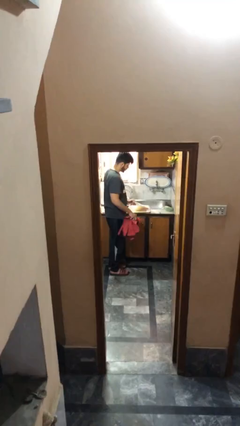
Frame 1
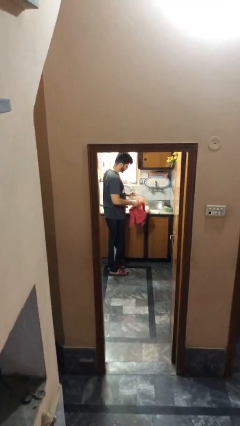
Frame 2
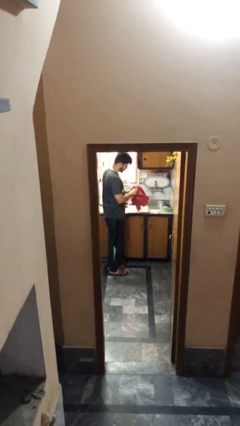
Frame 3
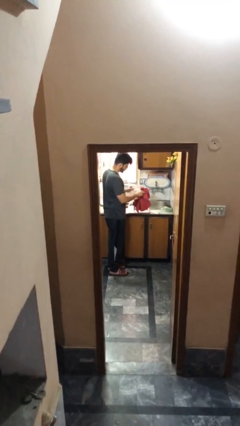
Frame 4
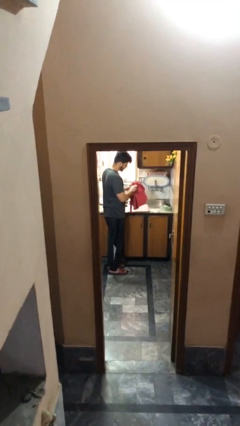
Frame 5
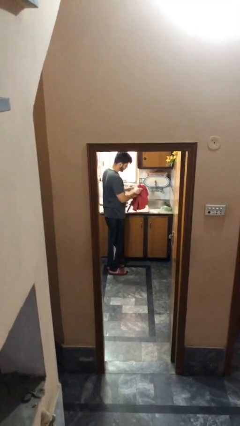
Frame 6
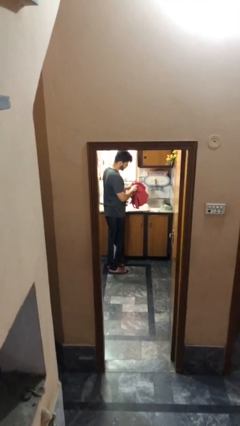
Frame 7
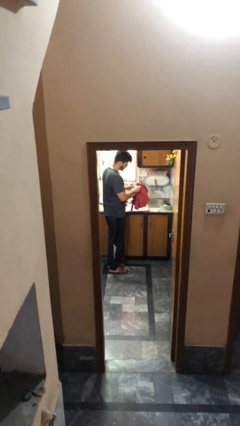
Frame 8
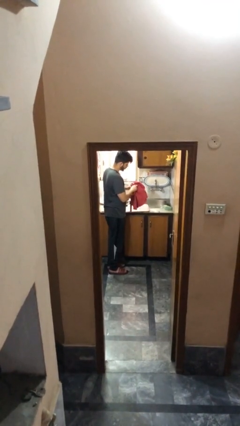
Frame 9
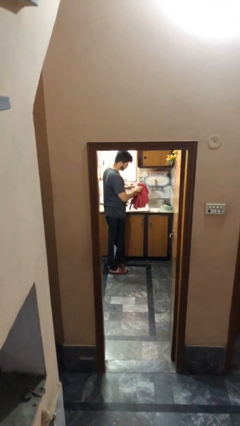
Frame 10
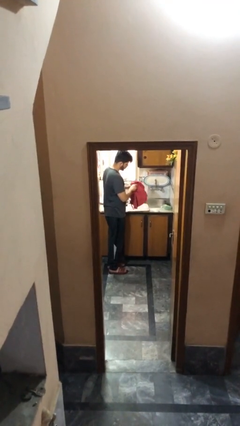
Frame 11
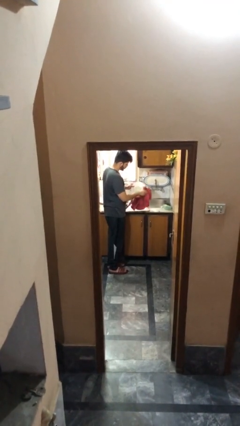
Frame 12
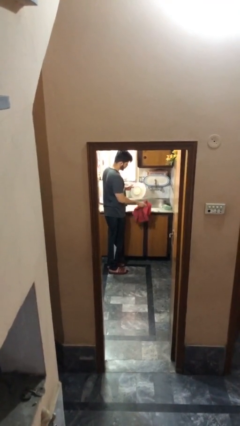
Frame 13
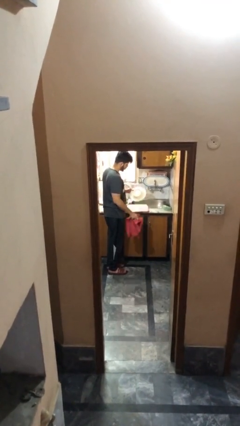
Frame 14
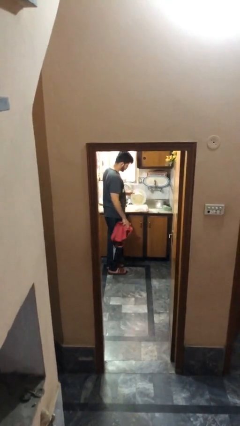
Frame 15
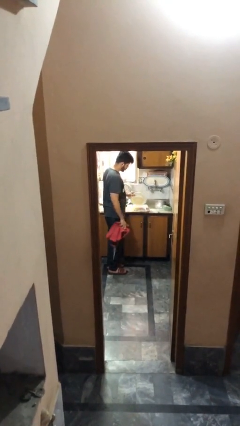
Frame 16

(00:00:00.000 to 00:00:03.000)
person dries dish

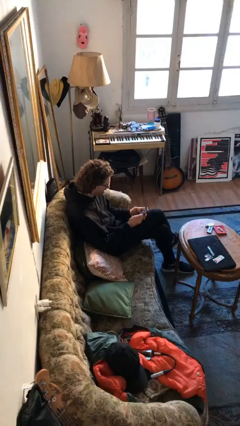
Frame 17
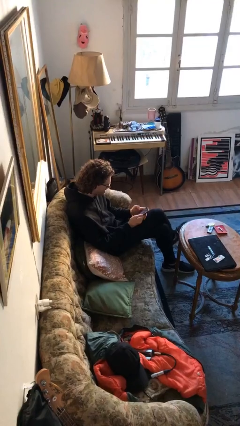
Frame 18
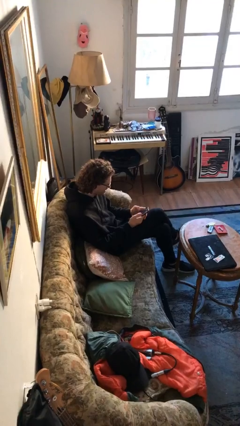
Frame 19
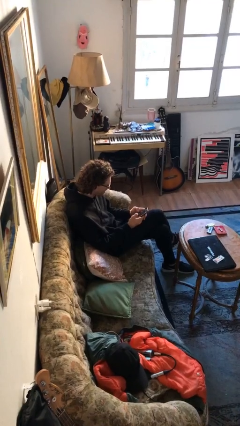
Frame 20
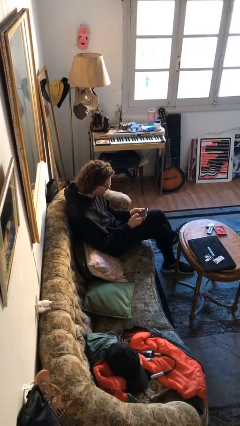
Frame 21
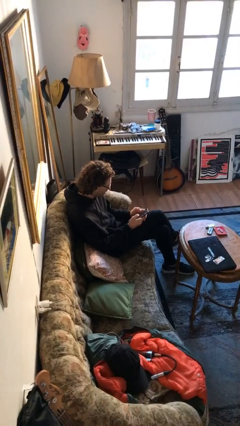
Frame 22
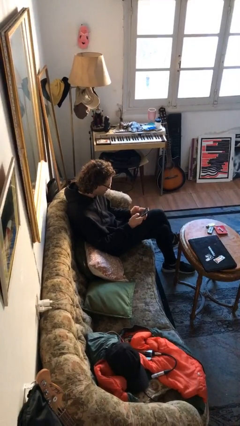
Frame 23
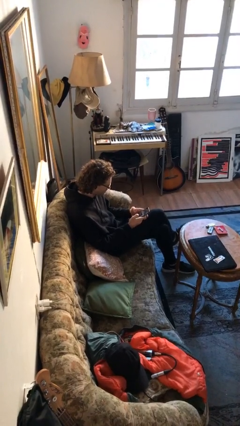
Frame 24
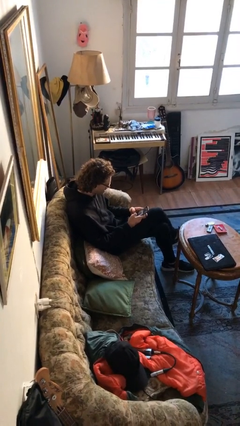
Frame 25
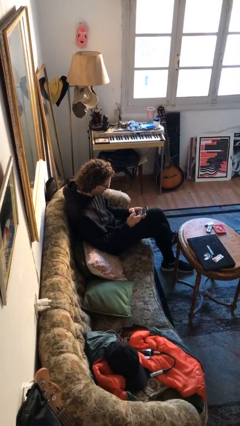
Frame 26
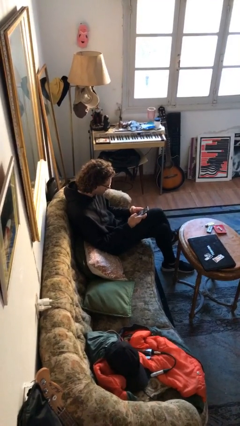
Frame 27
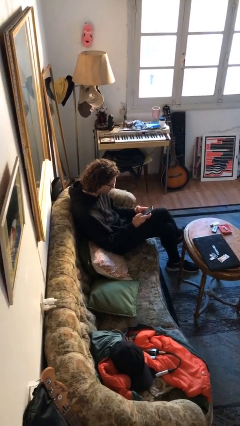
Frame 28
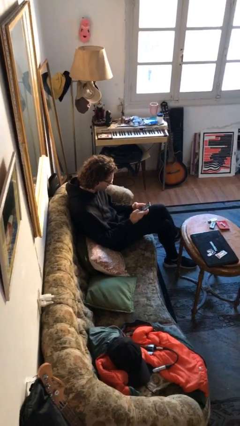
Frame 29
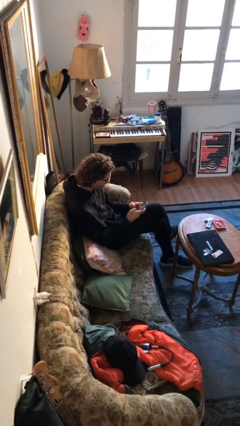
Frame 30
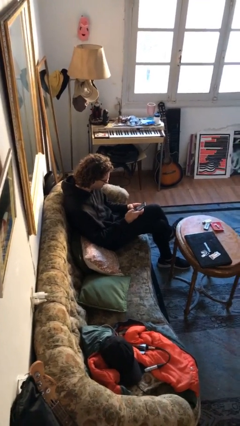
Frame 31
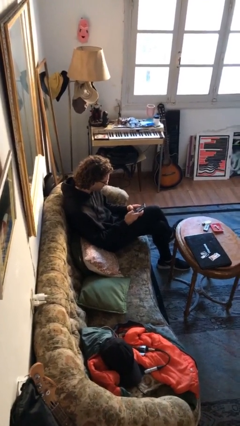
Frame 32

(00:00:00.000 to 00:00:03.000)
person texts on phone

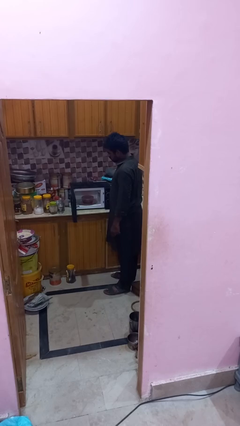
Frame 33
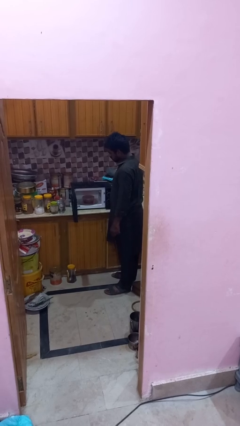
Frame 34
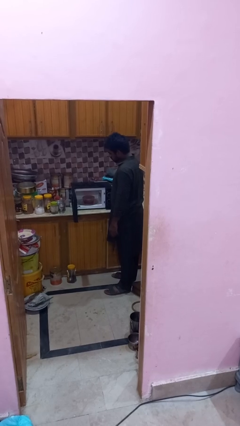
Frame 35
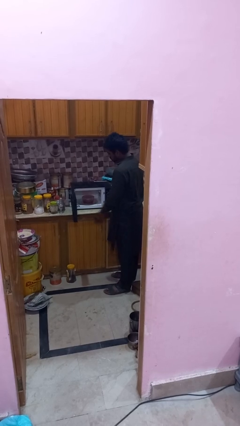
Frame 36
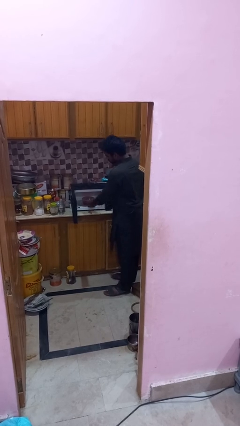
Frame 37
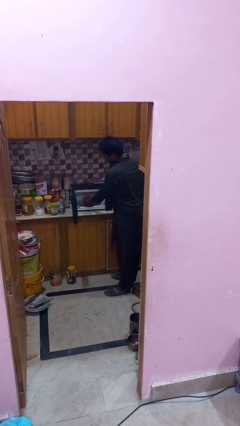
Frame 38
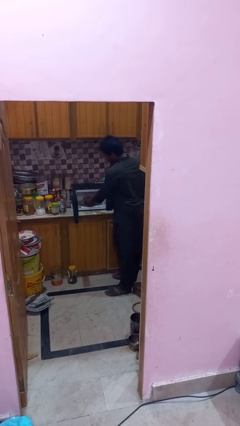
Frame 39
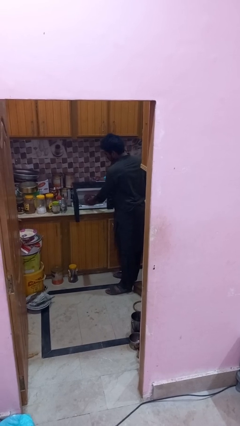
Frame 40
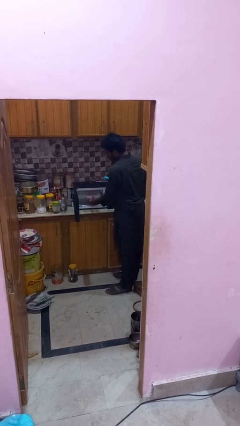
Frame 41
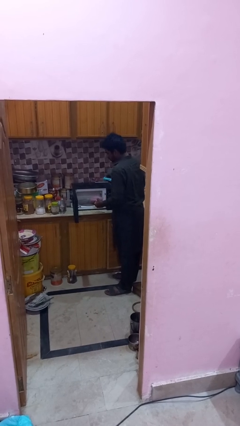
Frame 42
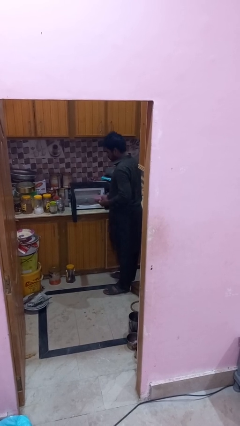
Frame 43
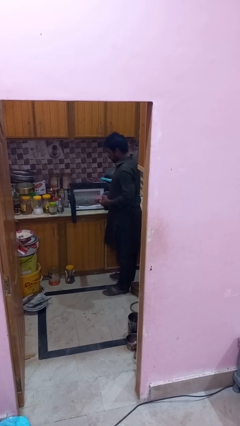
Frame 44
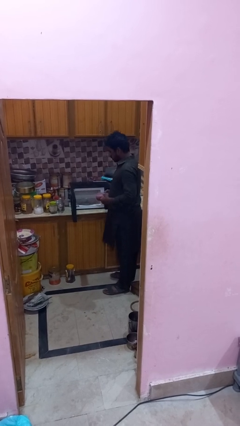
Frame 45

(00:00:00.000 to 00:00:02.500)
person takes object from microwave

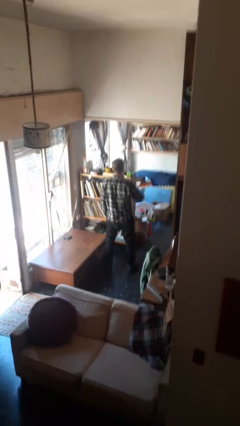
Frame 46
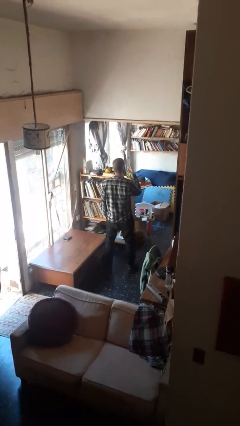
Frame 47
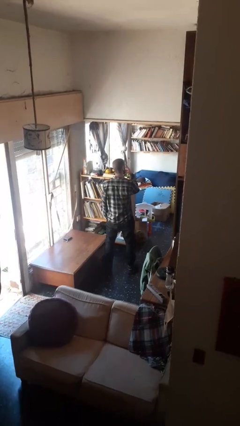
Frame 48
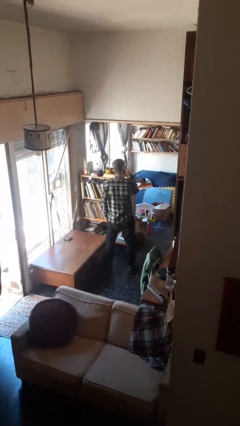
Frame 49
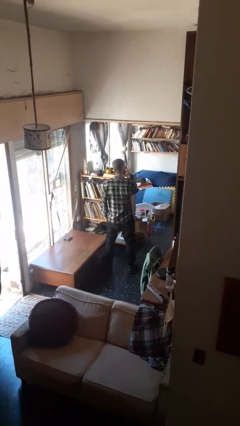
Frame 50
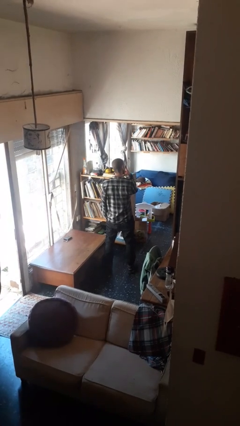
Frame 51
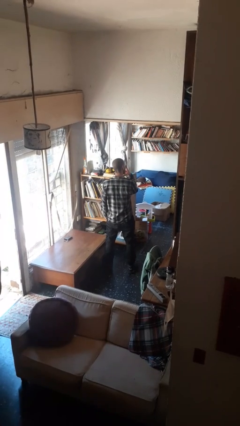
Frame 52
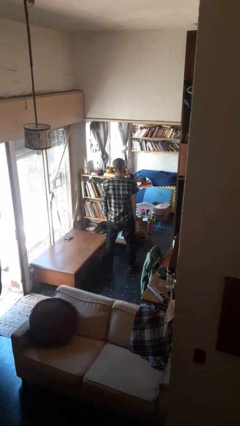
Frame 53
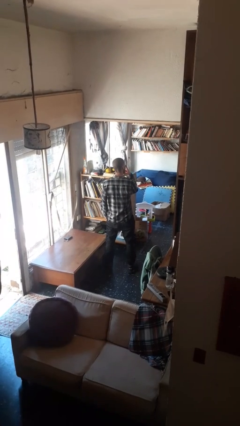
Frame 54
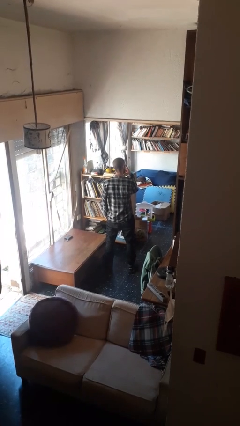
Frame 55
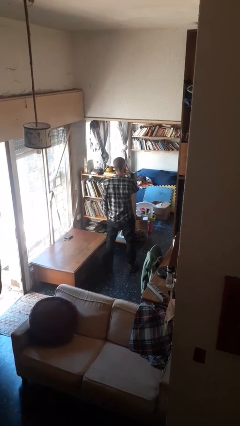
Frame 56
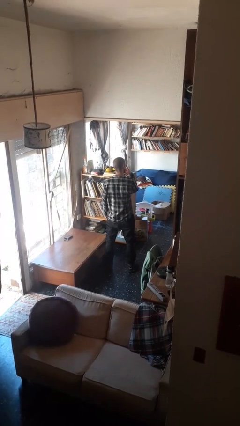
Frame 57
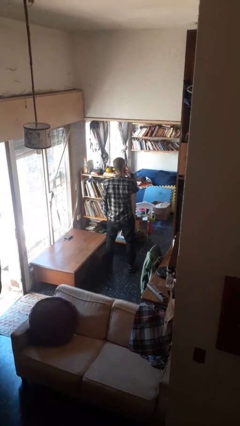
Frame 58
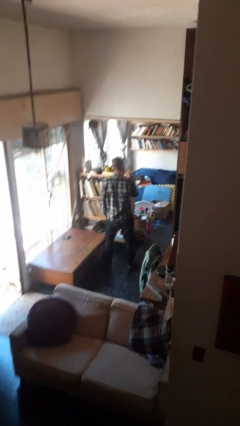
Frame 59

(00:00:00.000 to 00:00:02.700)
person gestures watch closely

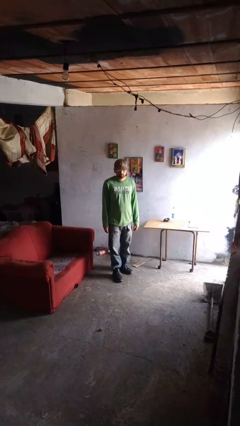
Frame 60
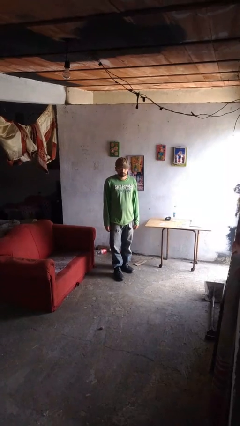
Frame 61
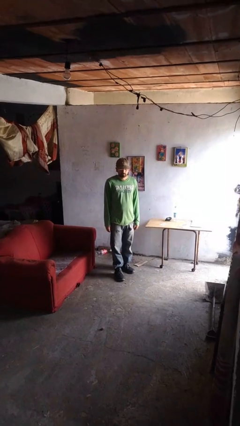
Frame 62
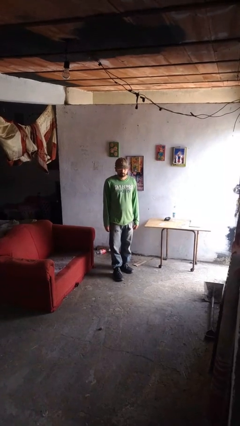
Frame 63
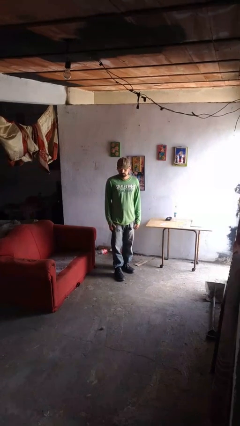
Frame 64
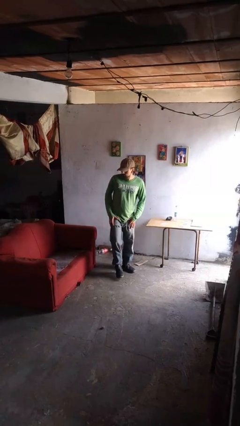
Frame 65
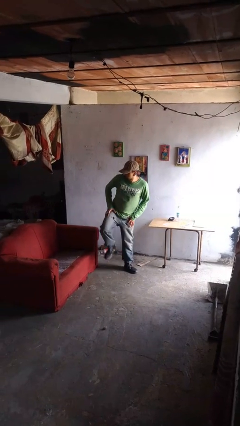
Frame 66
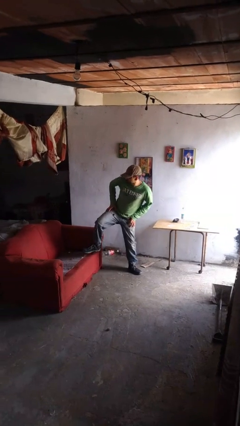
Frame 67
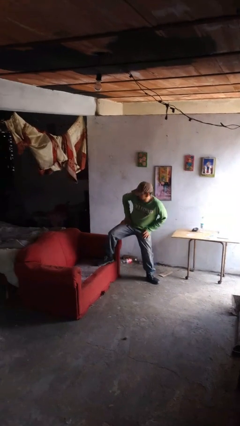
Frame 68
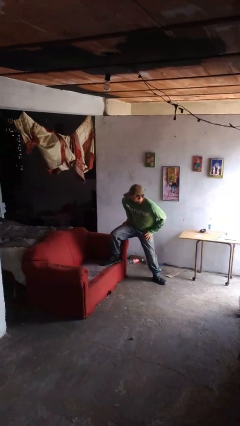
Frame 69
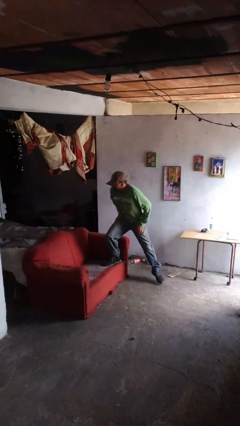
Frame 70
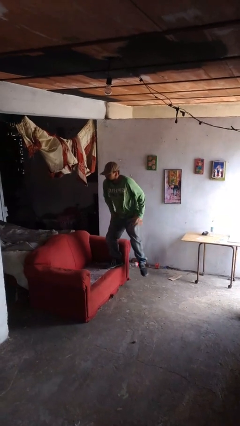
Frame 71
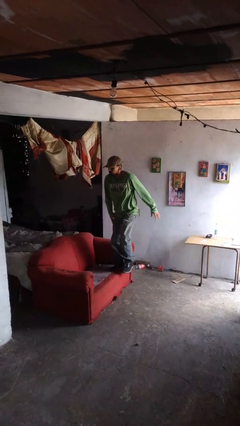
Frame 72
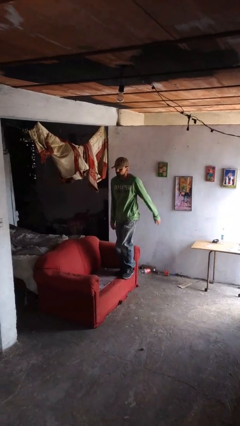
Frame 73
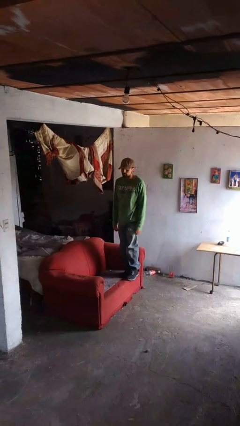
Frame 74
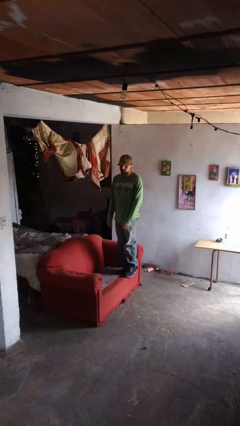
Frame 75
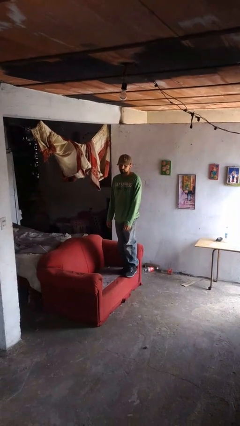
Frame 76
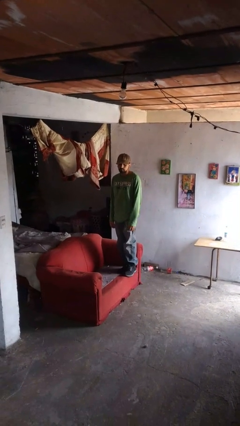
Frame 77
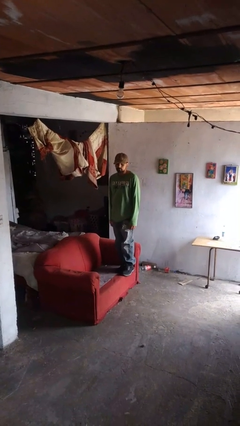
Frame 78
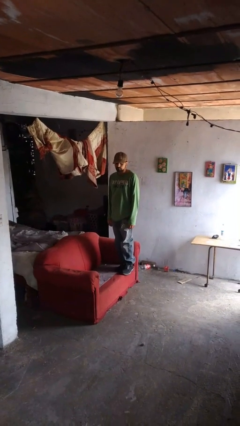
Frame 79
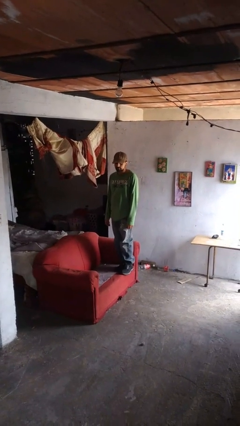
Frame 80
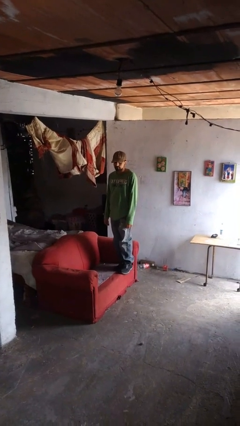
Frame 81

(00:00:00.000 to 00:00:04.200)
person climbs on couch

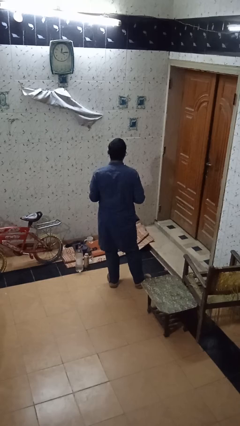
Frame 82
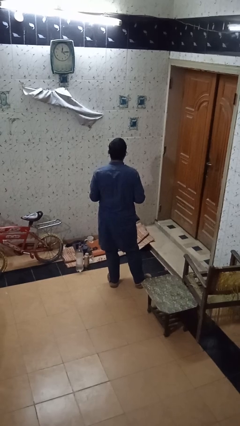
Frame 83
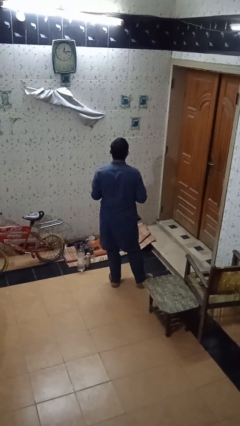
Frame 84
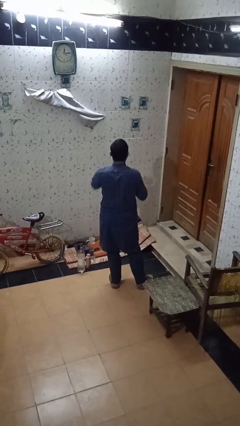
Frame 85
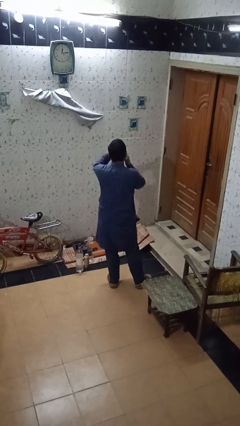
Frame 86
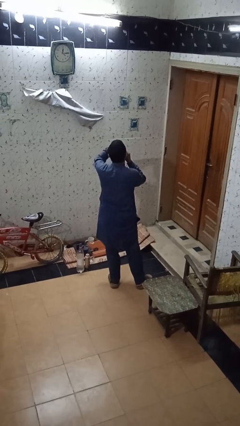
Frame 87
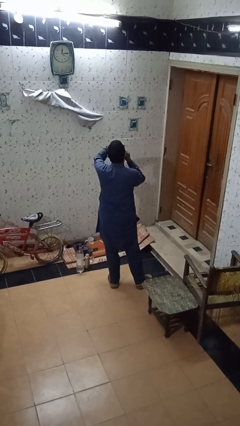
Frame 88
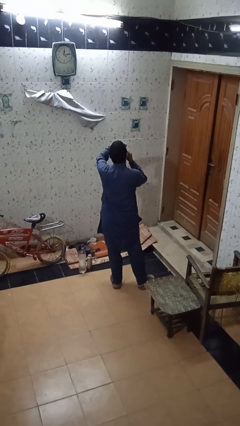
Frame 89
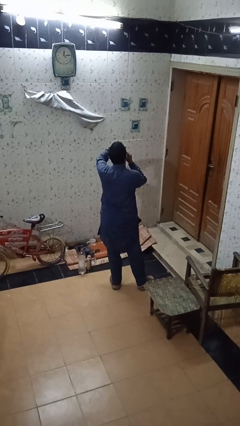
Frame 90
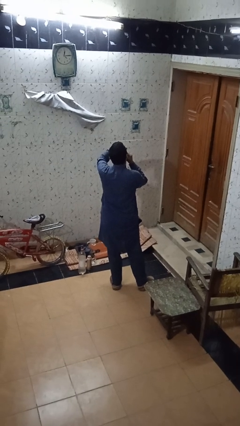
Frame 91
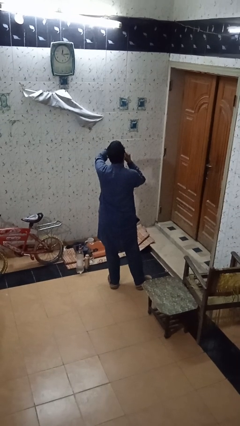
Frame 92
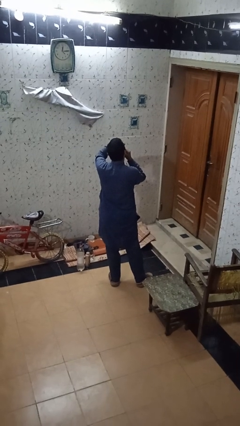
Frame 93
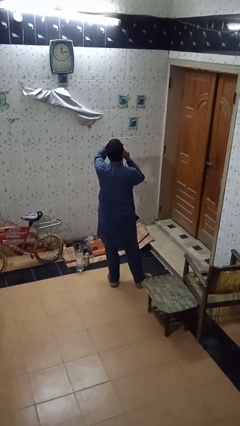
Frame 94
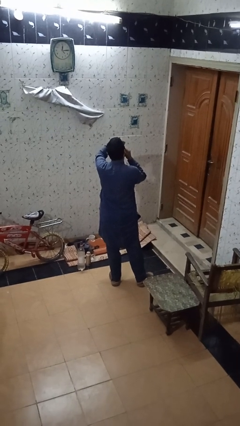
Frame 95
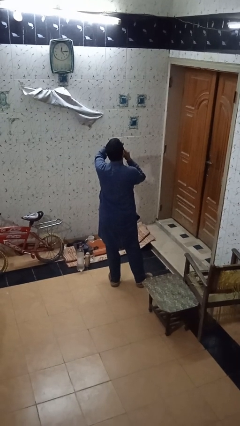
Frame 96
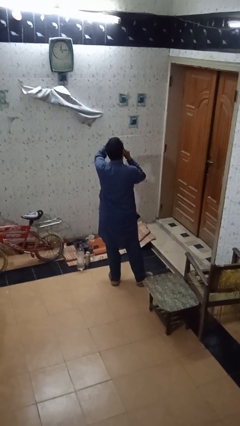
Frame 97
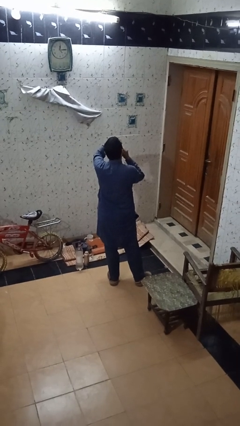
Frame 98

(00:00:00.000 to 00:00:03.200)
person flosses
